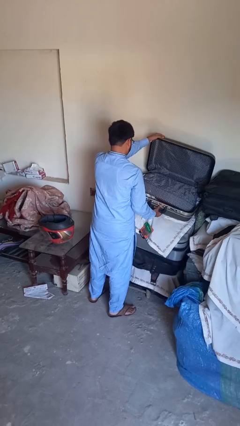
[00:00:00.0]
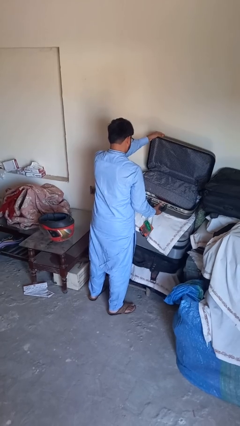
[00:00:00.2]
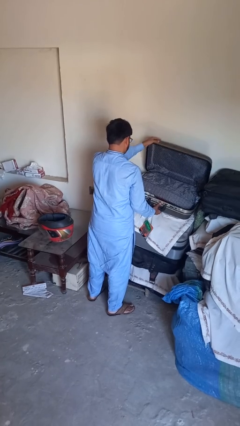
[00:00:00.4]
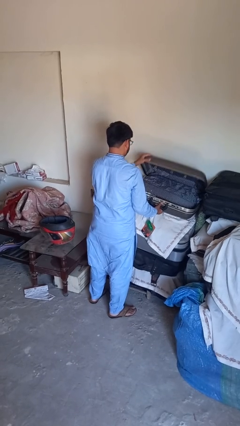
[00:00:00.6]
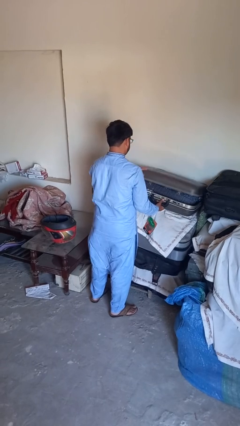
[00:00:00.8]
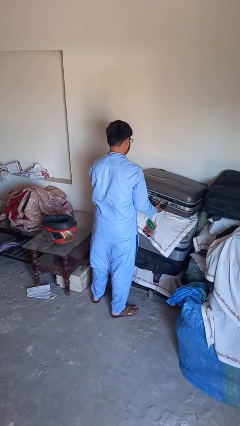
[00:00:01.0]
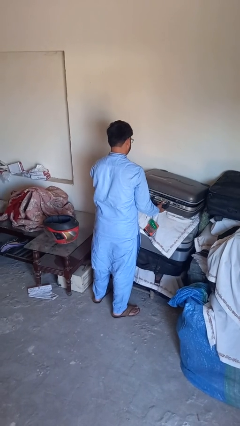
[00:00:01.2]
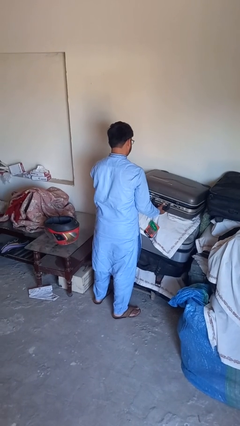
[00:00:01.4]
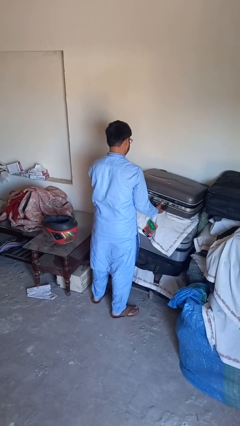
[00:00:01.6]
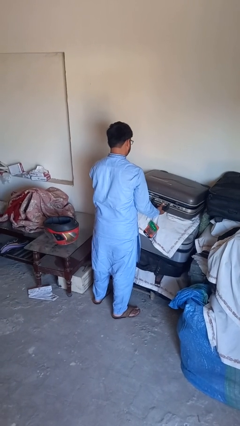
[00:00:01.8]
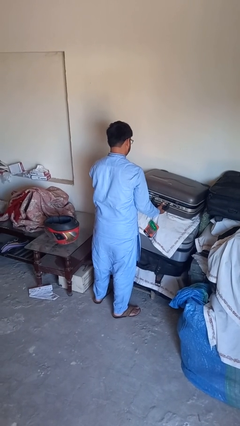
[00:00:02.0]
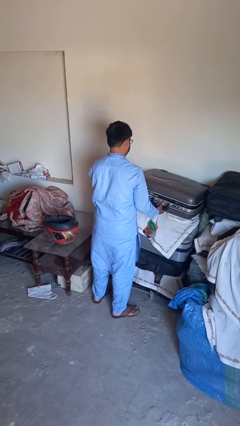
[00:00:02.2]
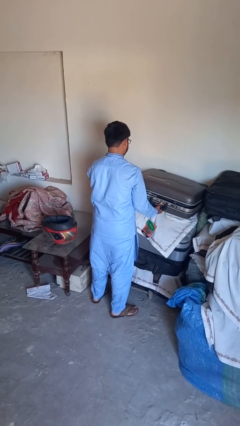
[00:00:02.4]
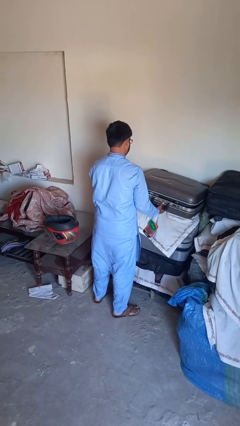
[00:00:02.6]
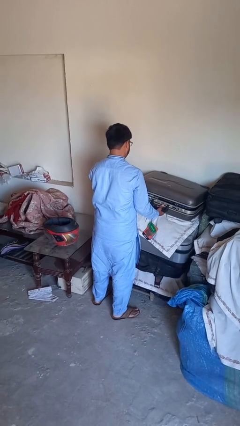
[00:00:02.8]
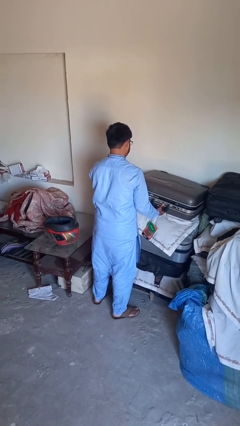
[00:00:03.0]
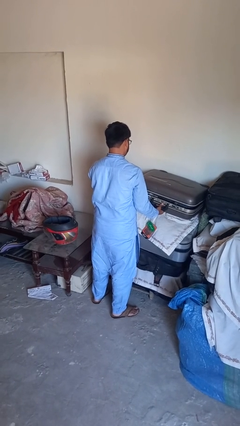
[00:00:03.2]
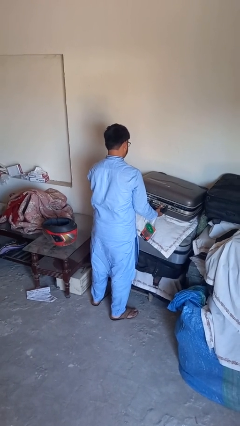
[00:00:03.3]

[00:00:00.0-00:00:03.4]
person closes suitcase

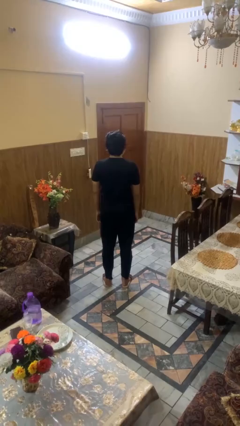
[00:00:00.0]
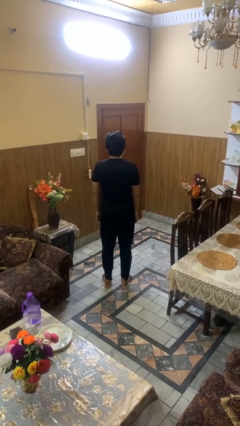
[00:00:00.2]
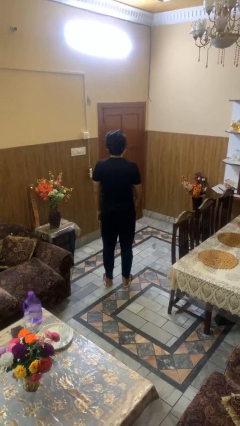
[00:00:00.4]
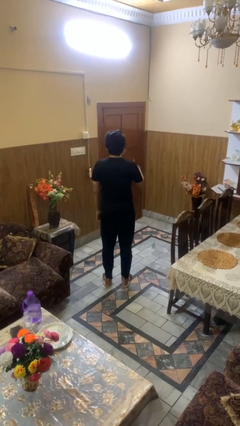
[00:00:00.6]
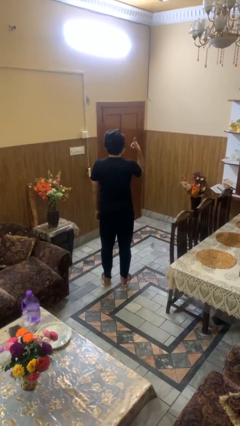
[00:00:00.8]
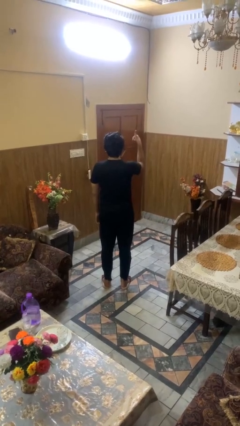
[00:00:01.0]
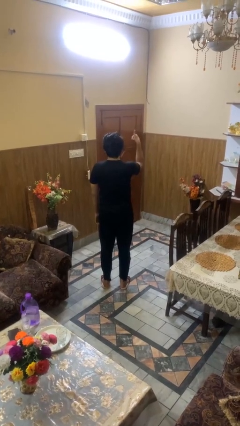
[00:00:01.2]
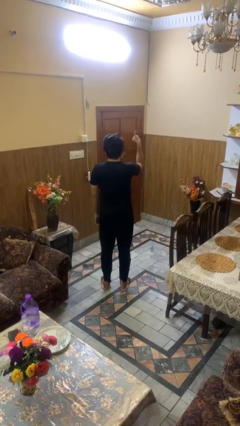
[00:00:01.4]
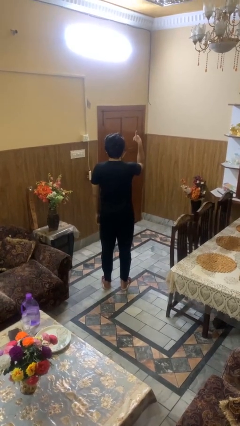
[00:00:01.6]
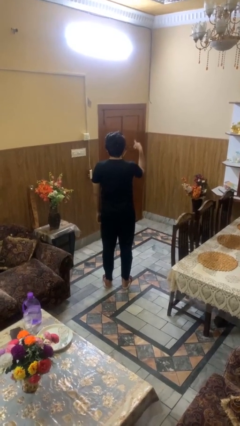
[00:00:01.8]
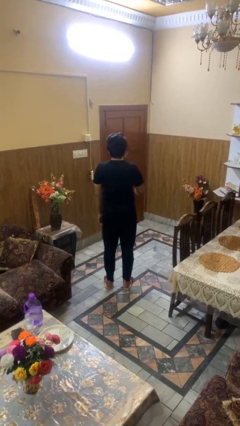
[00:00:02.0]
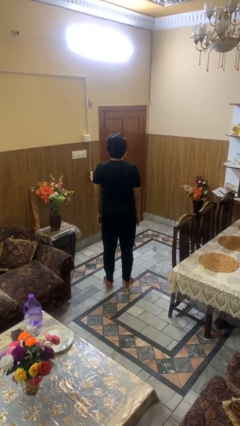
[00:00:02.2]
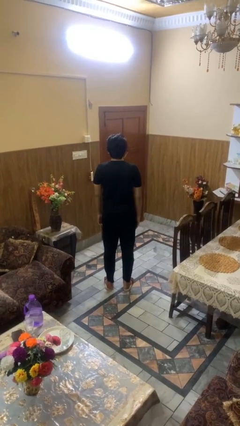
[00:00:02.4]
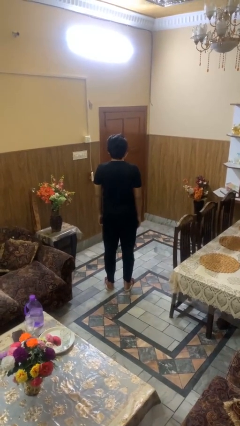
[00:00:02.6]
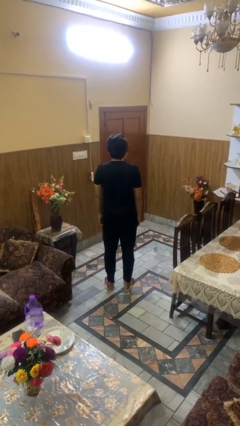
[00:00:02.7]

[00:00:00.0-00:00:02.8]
person gestures thumbs up

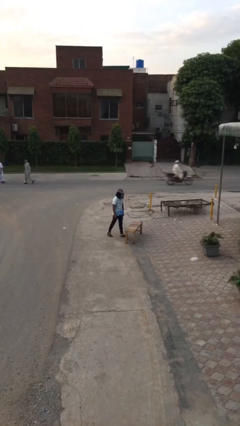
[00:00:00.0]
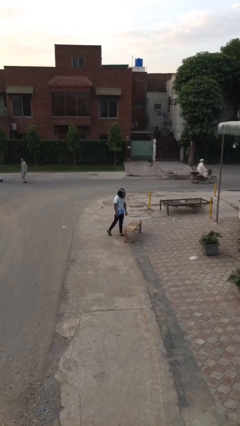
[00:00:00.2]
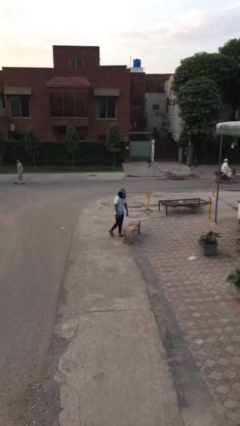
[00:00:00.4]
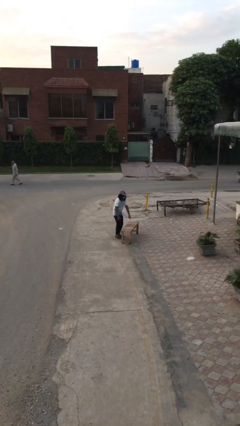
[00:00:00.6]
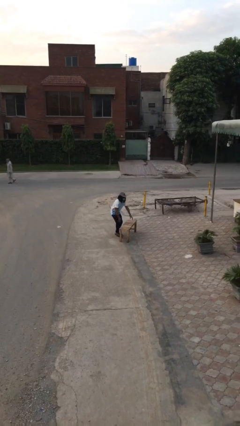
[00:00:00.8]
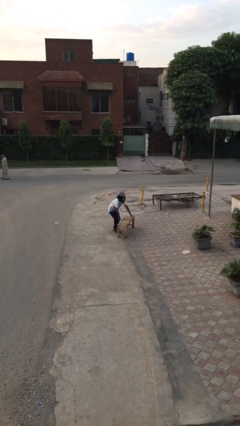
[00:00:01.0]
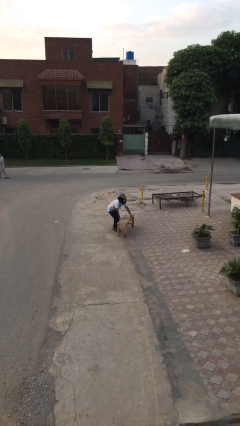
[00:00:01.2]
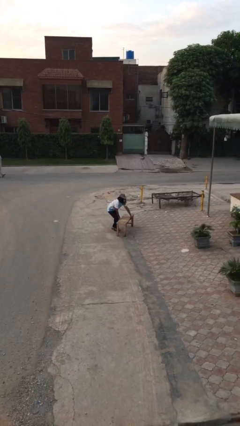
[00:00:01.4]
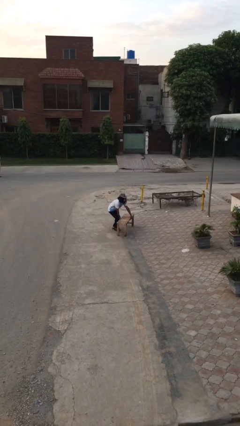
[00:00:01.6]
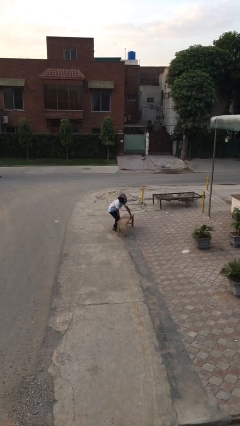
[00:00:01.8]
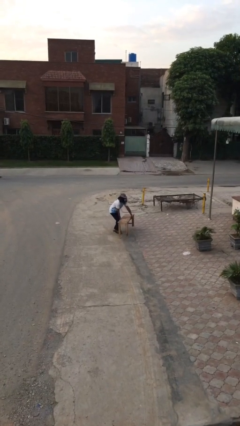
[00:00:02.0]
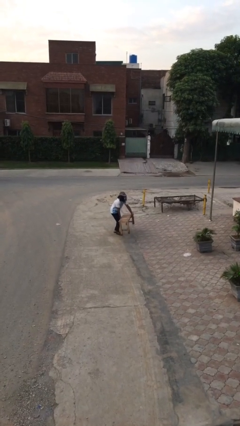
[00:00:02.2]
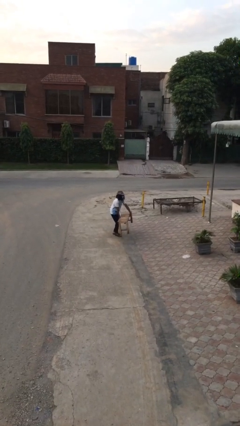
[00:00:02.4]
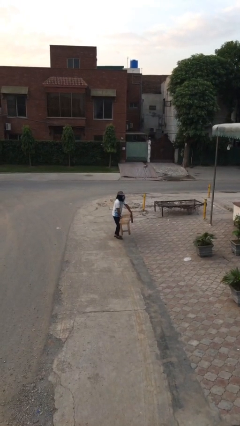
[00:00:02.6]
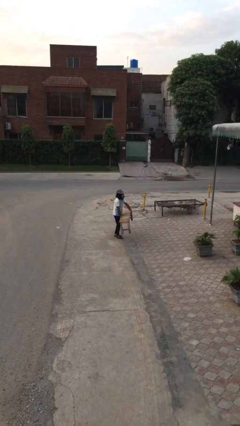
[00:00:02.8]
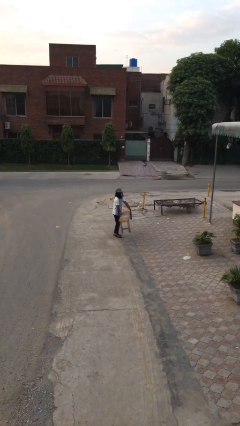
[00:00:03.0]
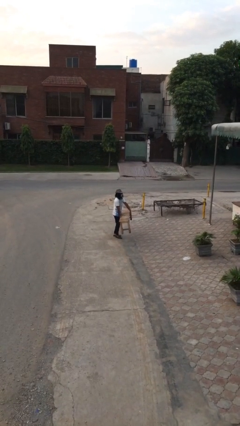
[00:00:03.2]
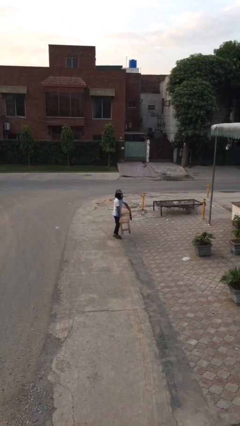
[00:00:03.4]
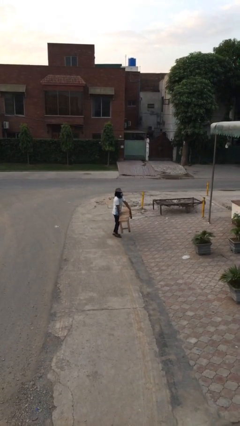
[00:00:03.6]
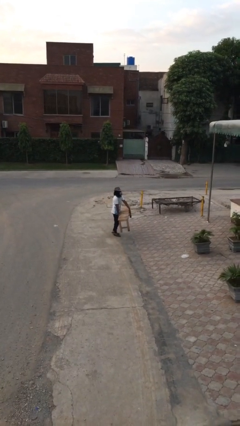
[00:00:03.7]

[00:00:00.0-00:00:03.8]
person picks up object from floor

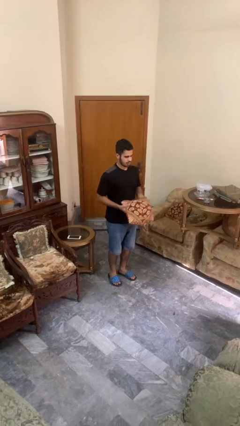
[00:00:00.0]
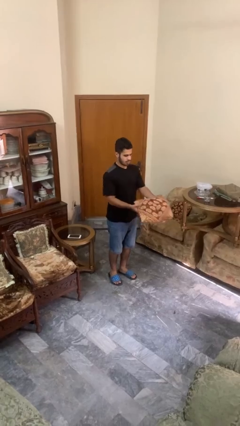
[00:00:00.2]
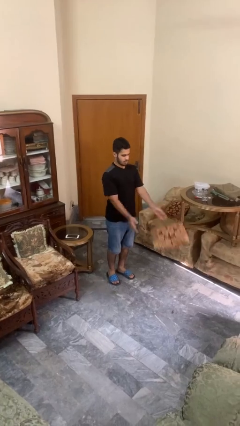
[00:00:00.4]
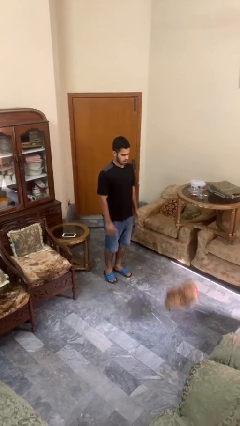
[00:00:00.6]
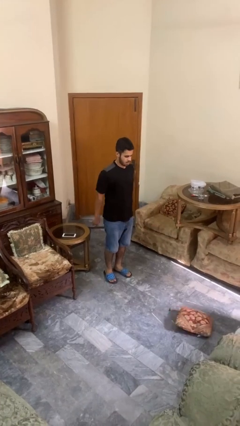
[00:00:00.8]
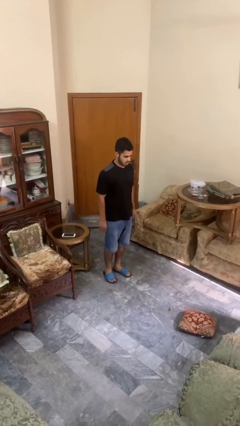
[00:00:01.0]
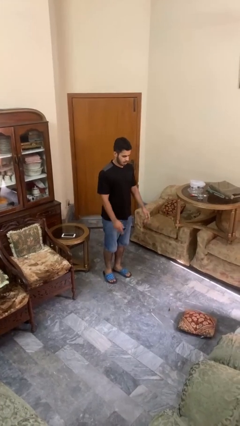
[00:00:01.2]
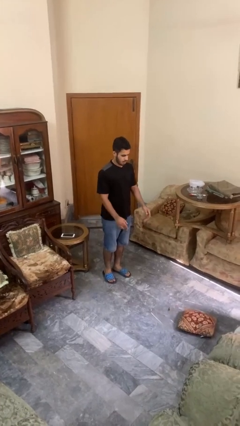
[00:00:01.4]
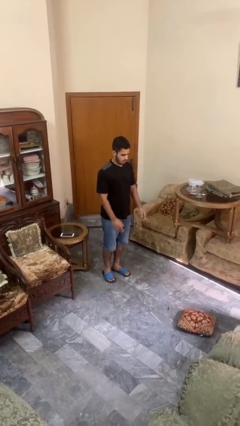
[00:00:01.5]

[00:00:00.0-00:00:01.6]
person throws object to ground

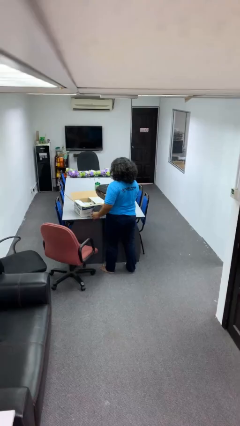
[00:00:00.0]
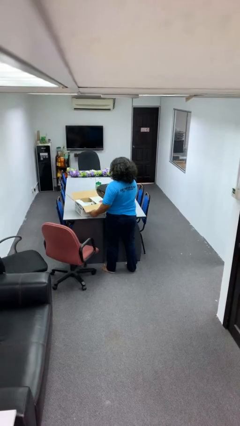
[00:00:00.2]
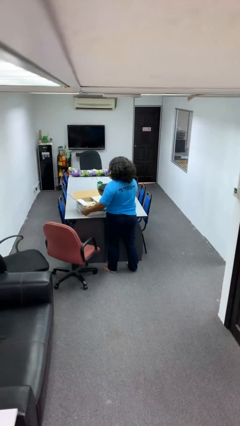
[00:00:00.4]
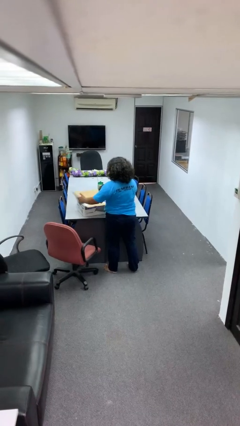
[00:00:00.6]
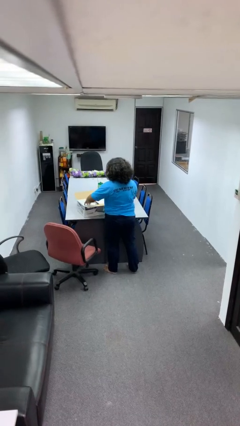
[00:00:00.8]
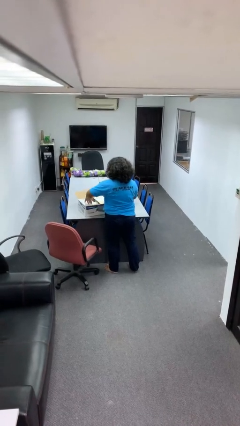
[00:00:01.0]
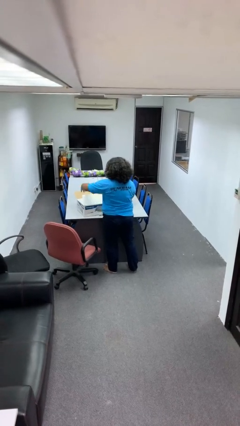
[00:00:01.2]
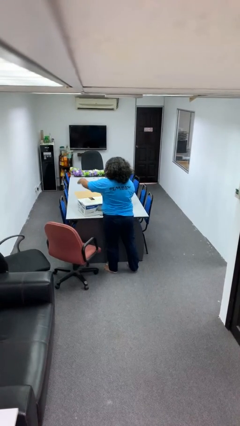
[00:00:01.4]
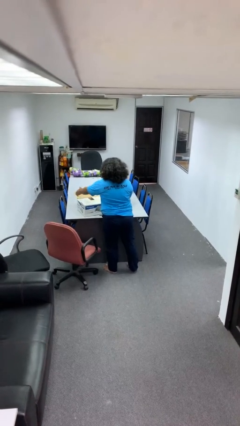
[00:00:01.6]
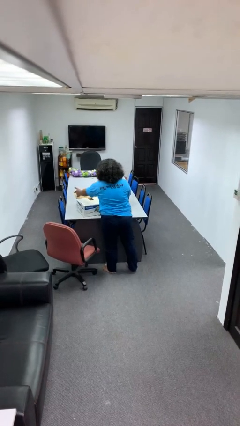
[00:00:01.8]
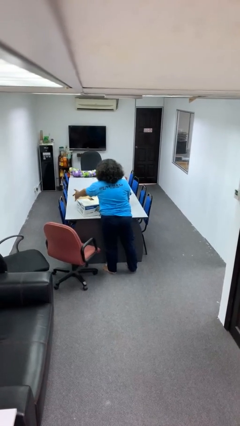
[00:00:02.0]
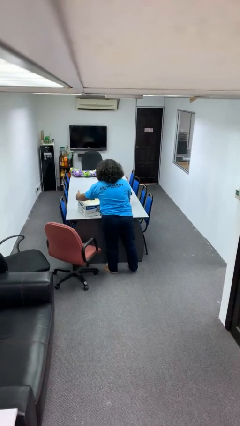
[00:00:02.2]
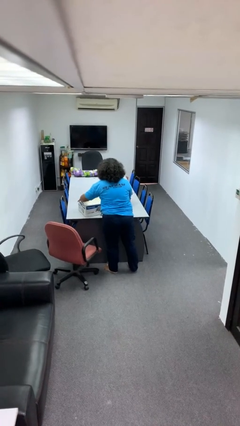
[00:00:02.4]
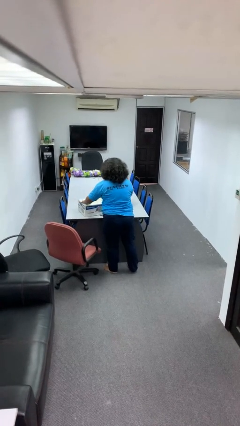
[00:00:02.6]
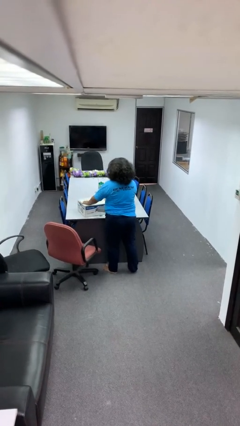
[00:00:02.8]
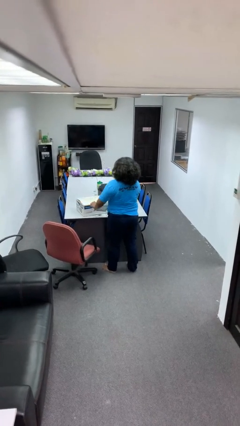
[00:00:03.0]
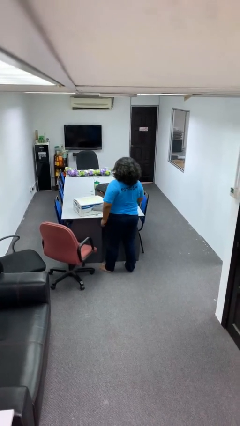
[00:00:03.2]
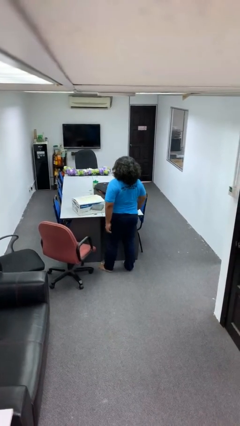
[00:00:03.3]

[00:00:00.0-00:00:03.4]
person closes box

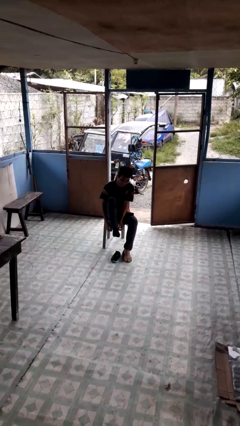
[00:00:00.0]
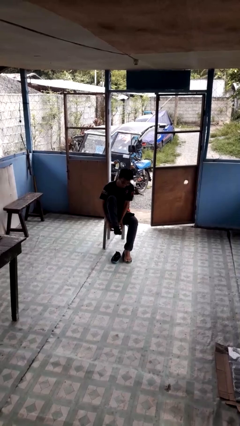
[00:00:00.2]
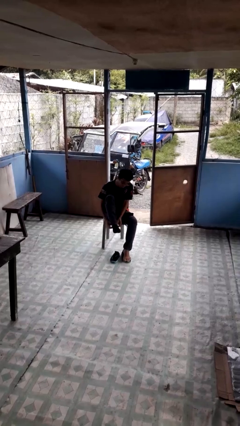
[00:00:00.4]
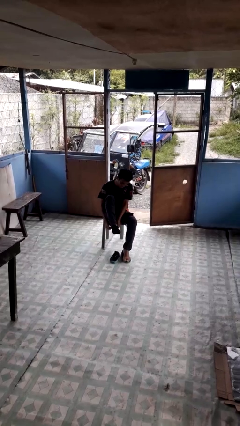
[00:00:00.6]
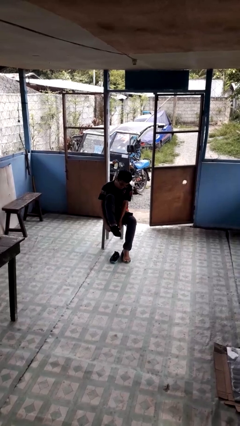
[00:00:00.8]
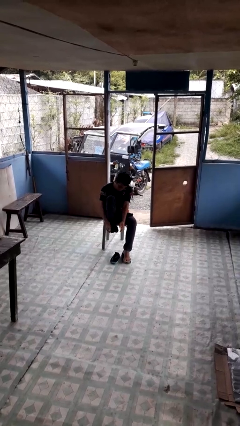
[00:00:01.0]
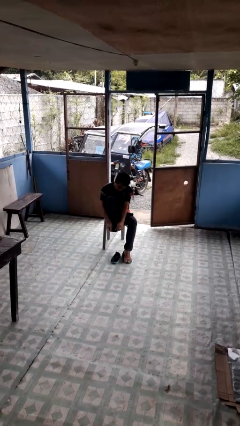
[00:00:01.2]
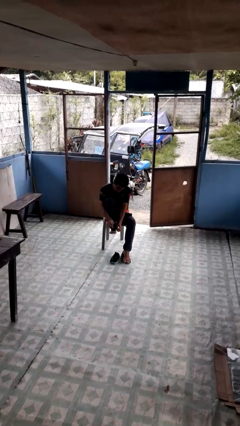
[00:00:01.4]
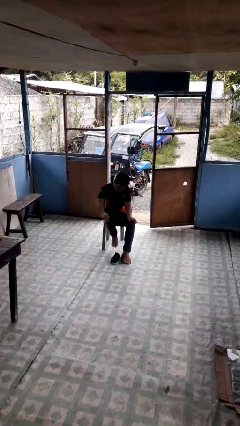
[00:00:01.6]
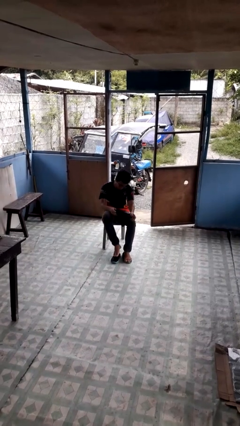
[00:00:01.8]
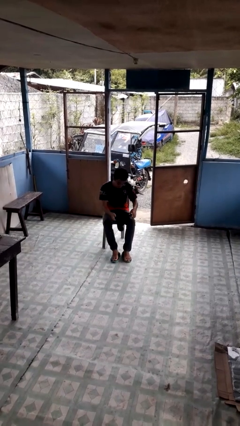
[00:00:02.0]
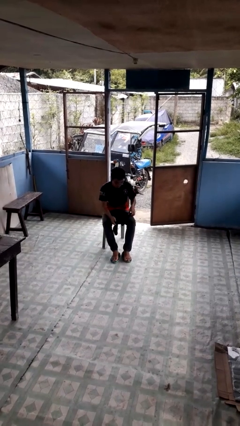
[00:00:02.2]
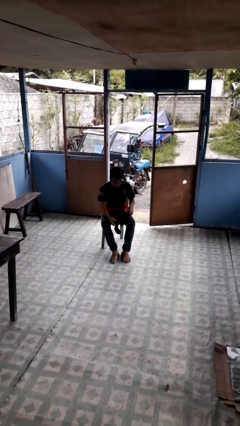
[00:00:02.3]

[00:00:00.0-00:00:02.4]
person takes off socks
